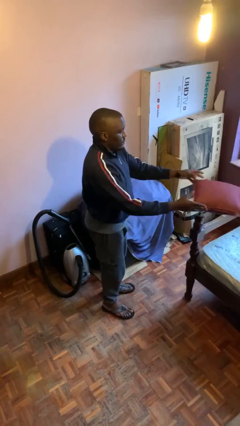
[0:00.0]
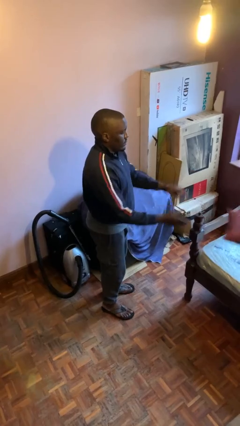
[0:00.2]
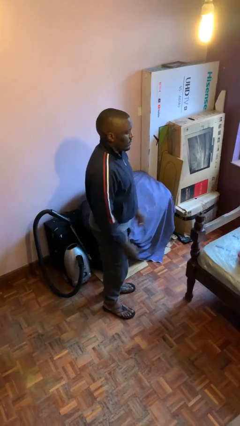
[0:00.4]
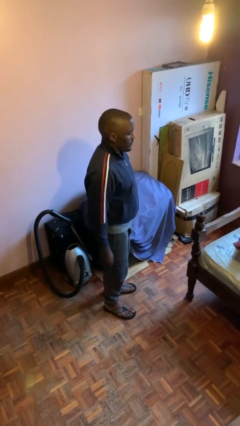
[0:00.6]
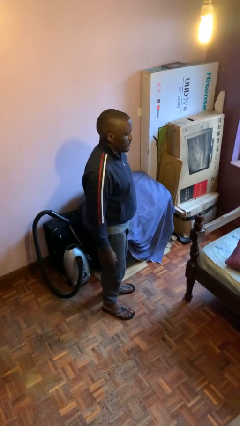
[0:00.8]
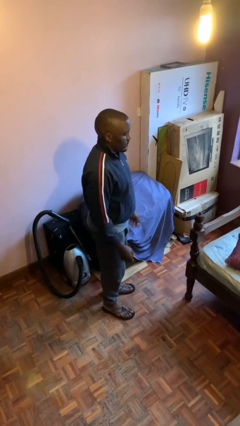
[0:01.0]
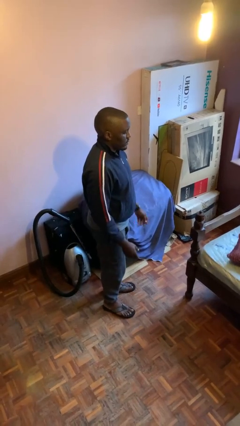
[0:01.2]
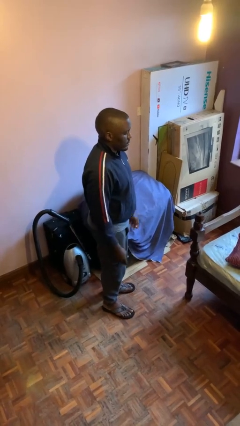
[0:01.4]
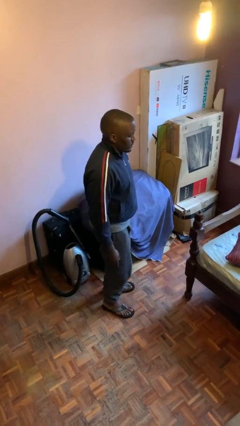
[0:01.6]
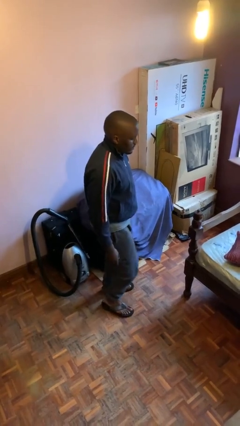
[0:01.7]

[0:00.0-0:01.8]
person throws object on bed

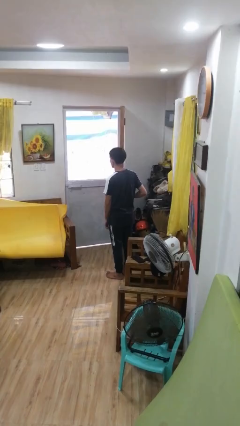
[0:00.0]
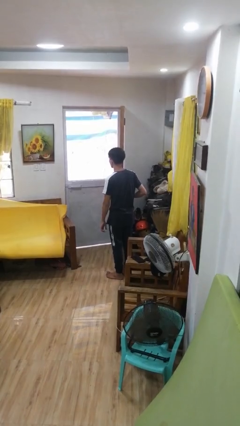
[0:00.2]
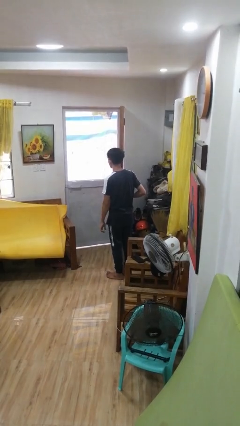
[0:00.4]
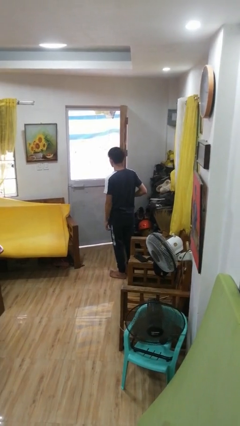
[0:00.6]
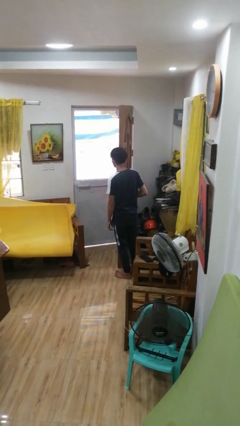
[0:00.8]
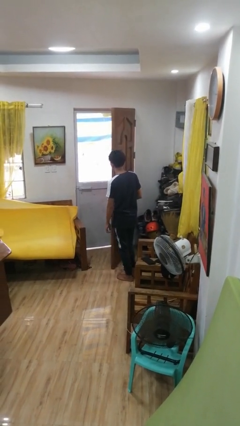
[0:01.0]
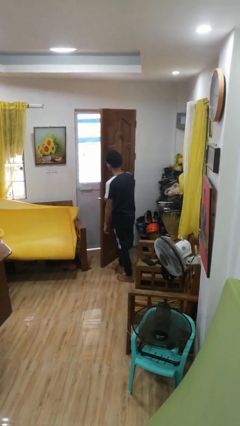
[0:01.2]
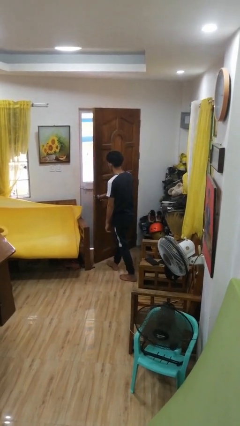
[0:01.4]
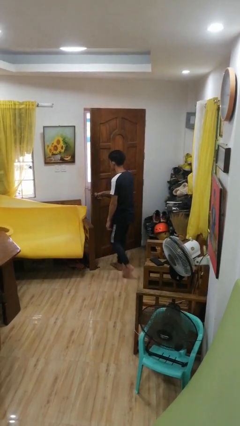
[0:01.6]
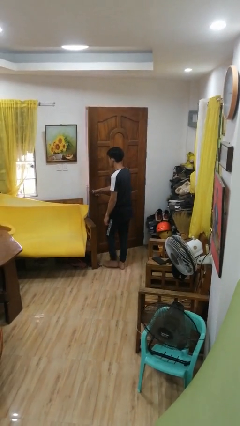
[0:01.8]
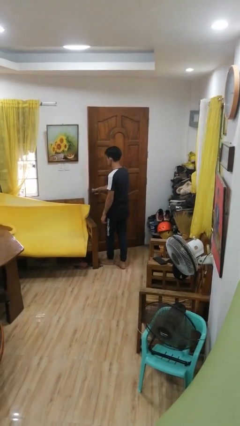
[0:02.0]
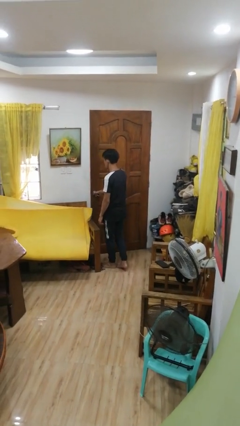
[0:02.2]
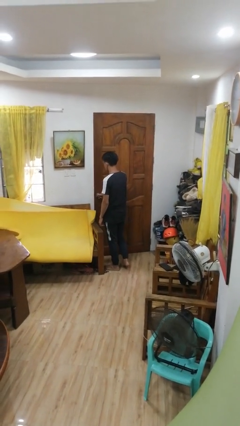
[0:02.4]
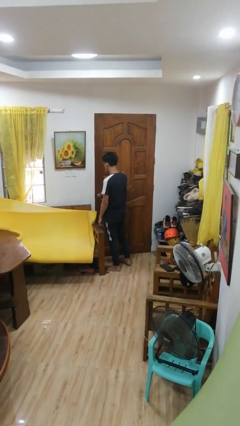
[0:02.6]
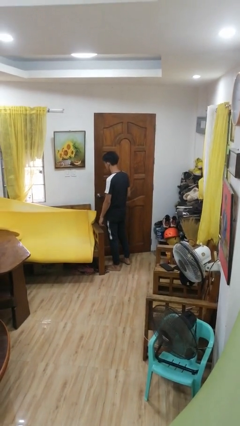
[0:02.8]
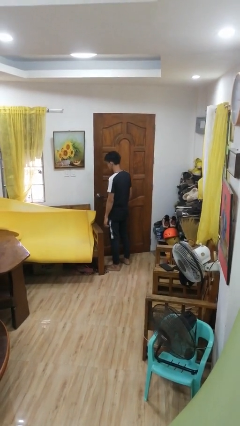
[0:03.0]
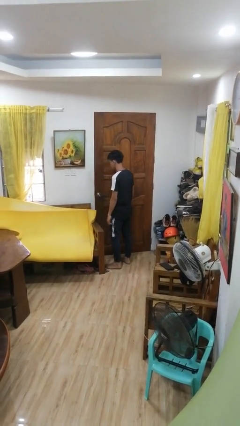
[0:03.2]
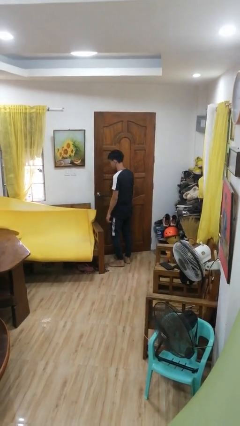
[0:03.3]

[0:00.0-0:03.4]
person closes facility door

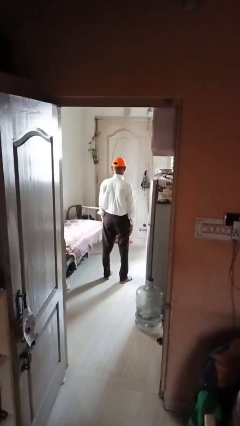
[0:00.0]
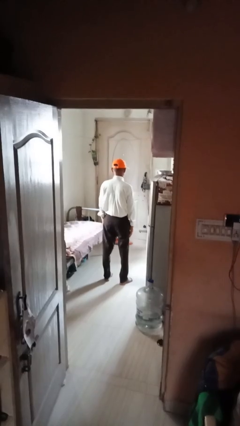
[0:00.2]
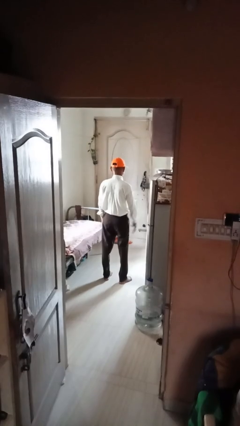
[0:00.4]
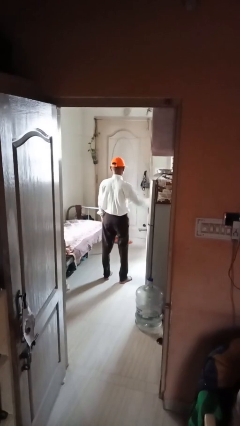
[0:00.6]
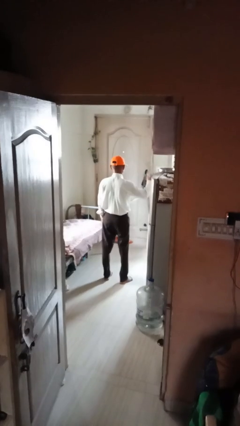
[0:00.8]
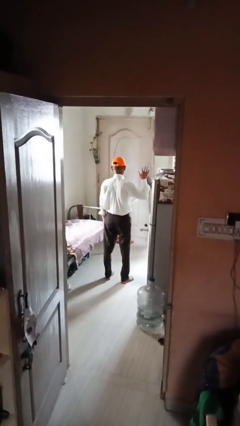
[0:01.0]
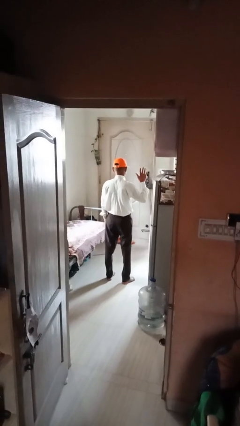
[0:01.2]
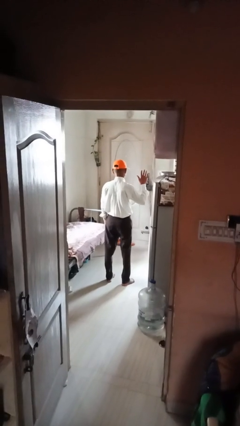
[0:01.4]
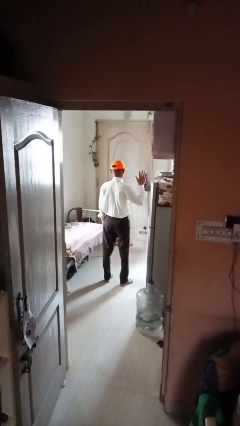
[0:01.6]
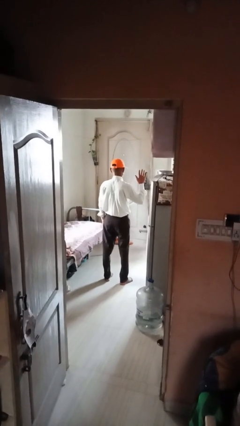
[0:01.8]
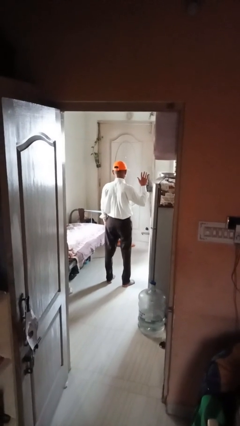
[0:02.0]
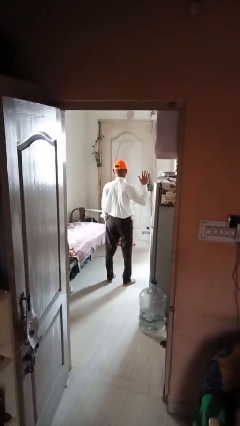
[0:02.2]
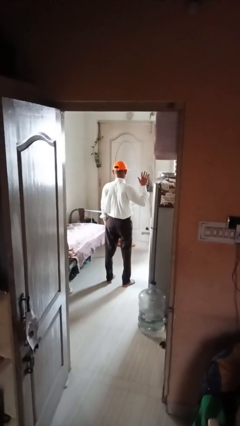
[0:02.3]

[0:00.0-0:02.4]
person gestures number five

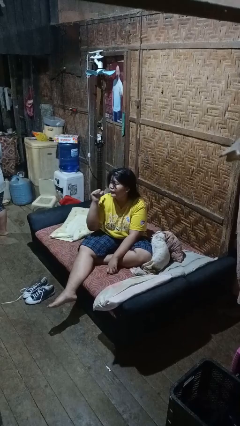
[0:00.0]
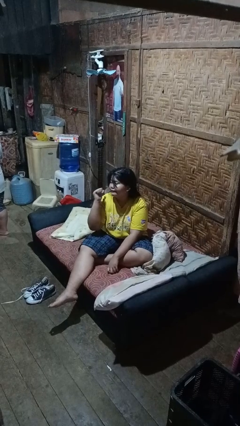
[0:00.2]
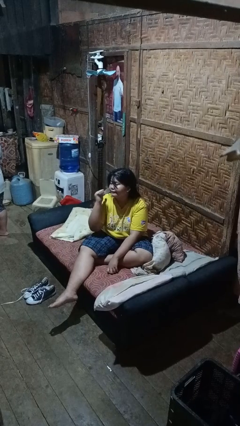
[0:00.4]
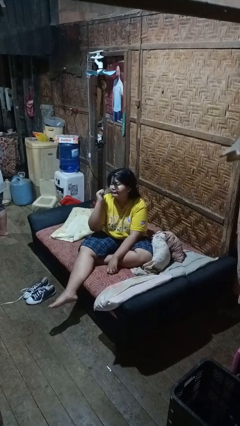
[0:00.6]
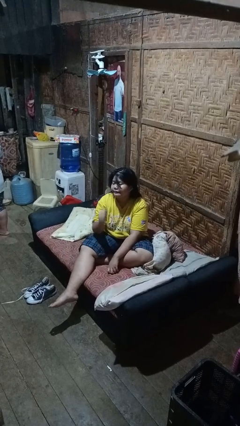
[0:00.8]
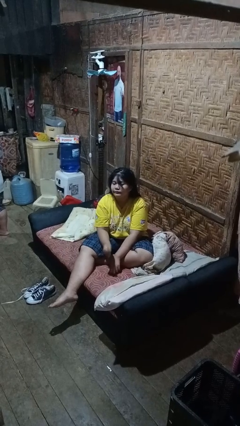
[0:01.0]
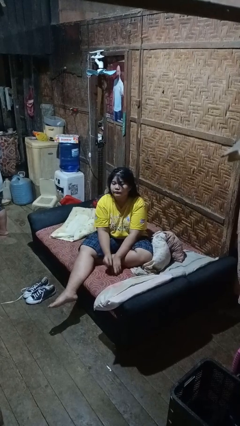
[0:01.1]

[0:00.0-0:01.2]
person gestures behind me

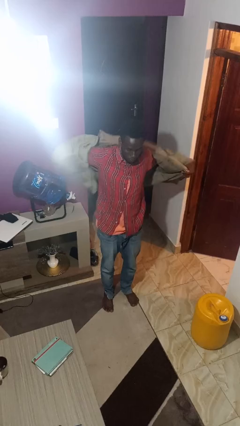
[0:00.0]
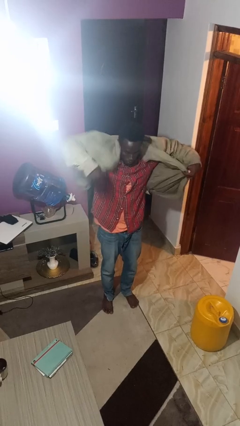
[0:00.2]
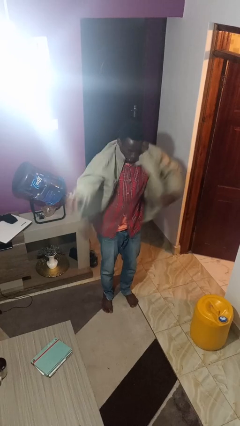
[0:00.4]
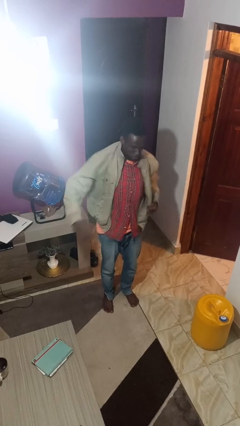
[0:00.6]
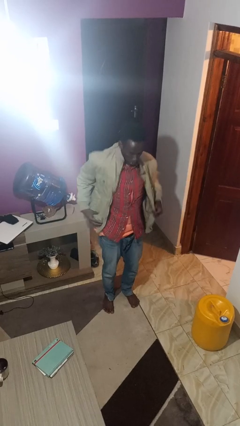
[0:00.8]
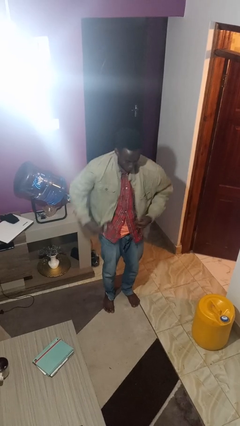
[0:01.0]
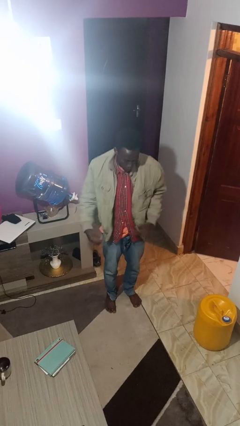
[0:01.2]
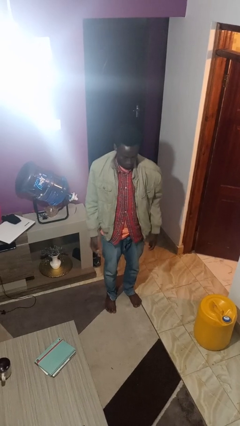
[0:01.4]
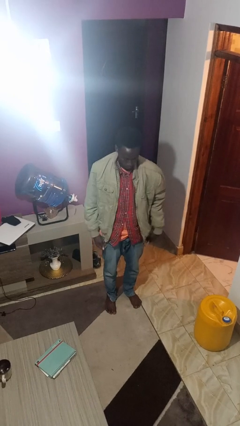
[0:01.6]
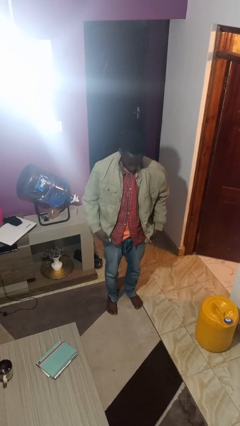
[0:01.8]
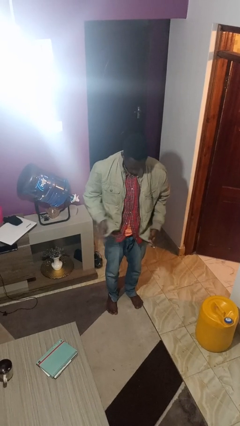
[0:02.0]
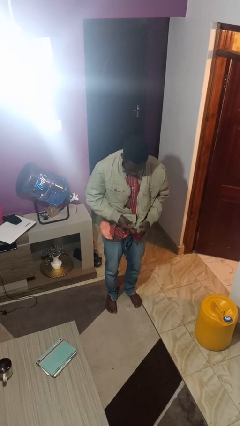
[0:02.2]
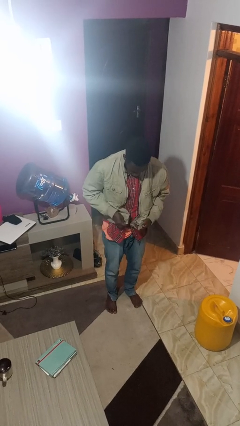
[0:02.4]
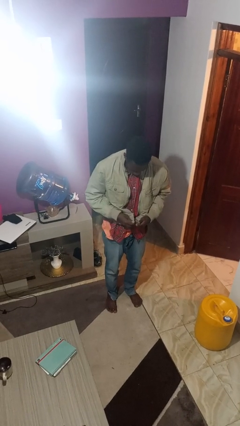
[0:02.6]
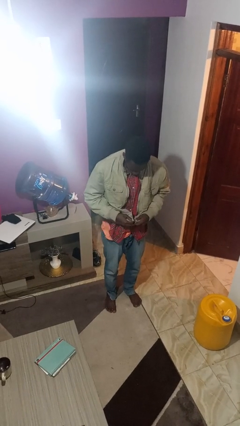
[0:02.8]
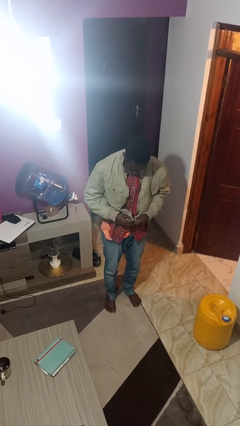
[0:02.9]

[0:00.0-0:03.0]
person puts on jacket

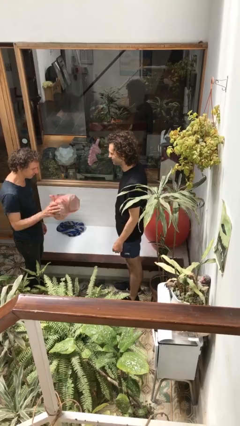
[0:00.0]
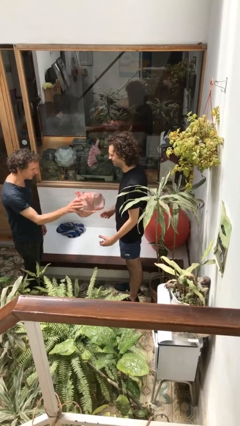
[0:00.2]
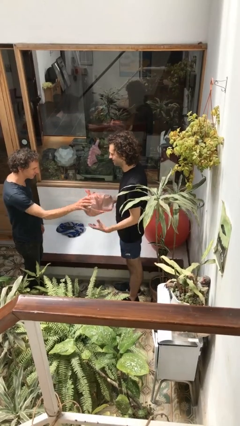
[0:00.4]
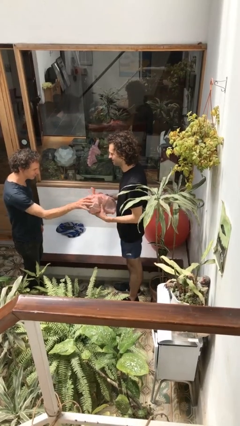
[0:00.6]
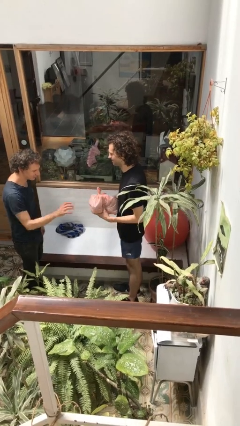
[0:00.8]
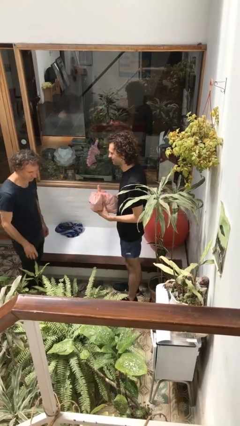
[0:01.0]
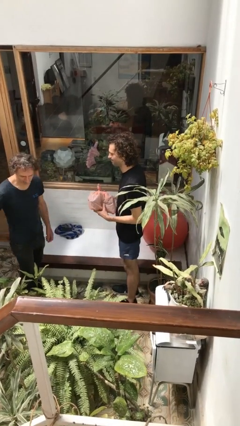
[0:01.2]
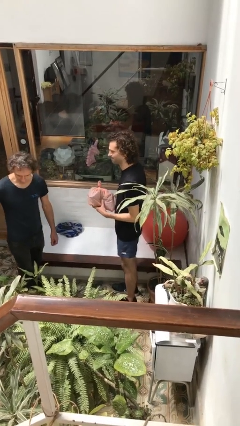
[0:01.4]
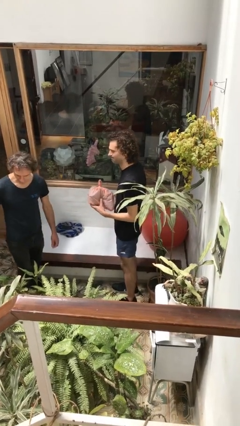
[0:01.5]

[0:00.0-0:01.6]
person transfers object to person

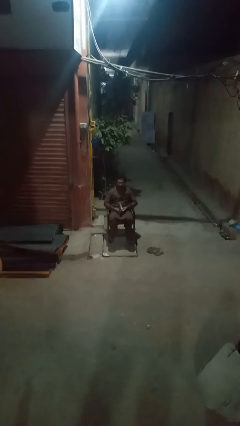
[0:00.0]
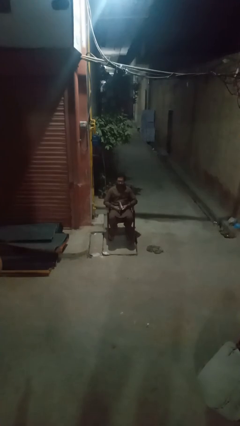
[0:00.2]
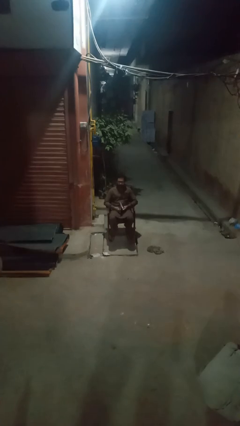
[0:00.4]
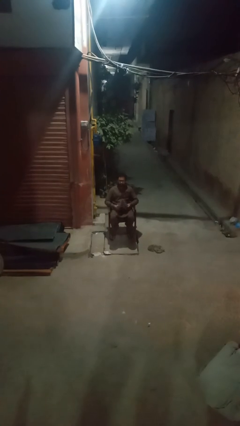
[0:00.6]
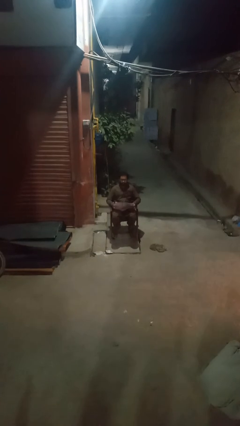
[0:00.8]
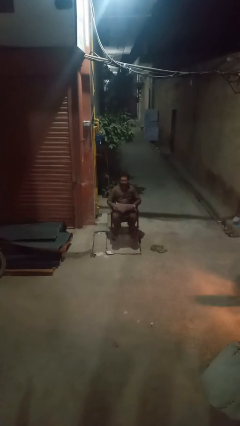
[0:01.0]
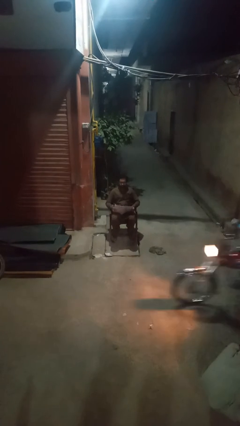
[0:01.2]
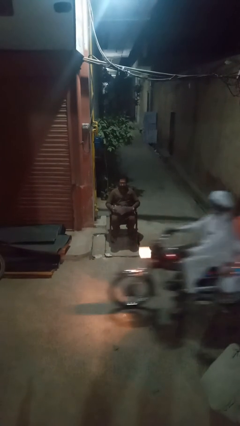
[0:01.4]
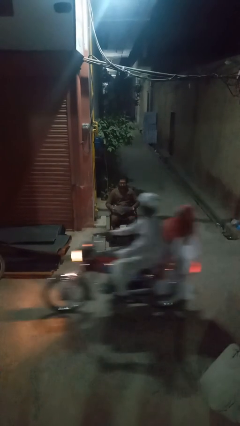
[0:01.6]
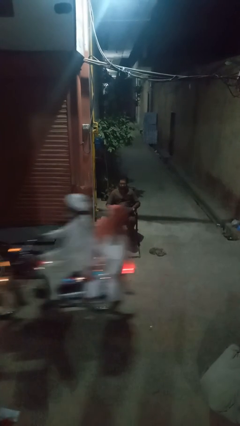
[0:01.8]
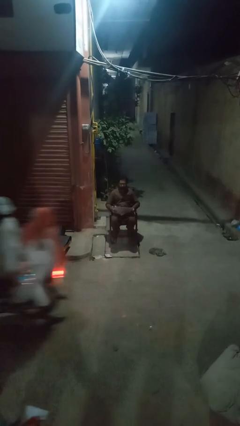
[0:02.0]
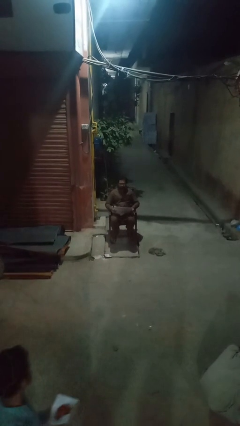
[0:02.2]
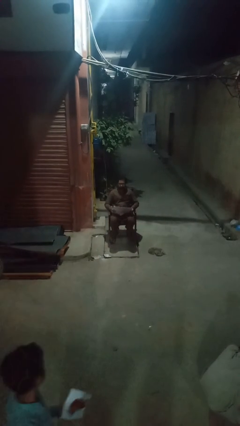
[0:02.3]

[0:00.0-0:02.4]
person reads magazine

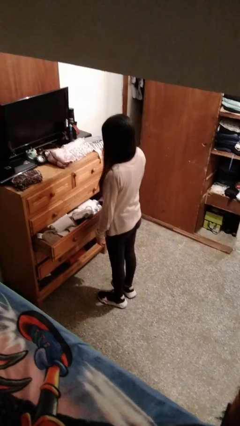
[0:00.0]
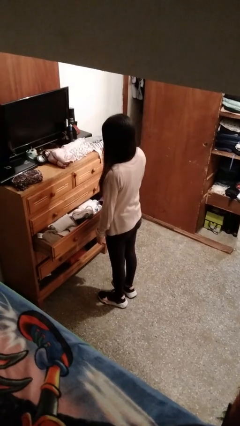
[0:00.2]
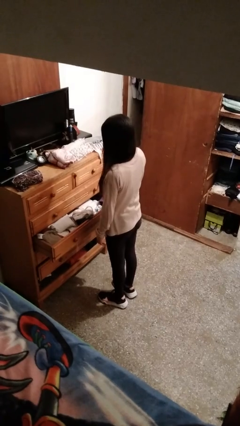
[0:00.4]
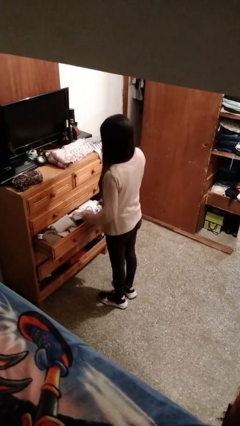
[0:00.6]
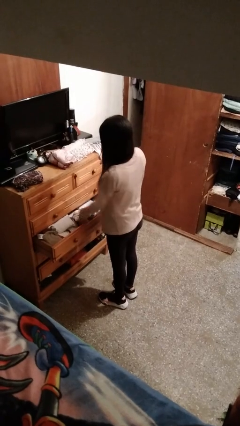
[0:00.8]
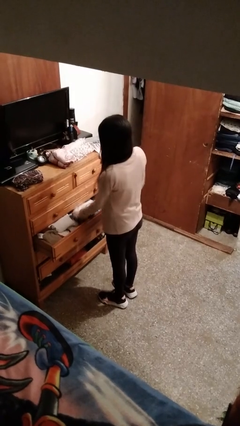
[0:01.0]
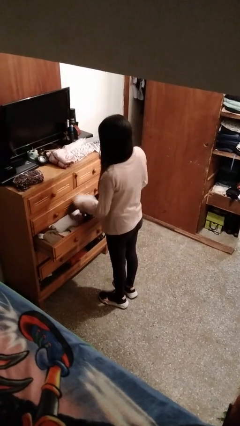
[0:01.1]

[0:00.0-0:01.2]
person takes clothes from dresser
